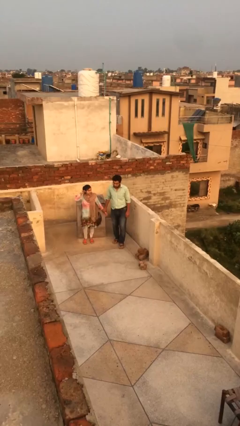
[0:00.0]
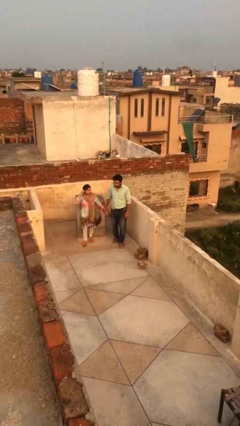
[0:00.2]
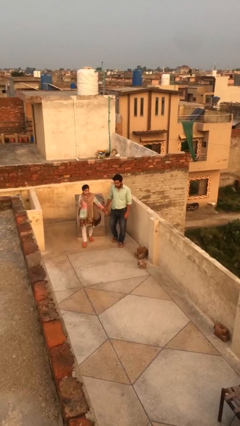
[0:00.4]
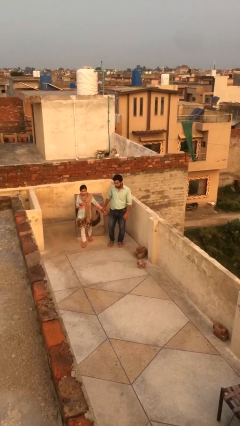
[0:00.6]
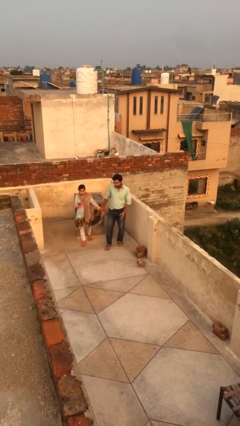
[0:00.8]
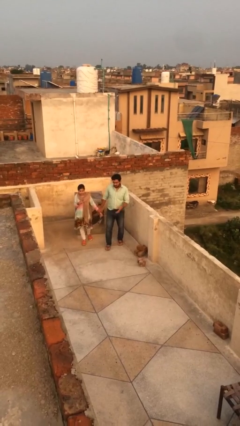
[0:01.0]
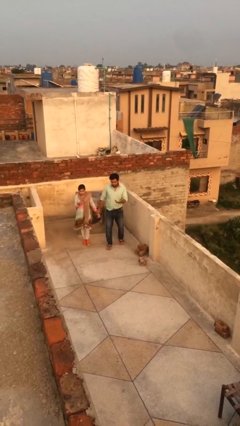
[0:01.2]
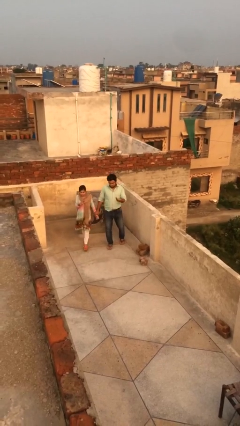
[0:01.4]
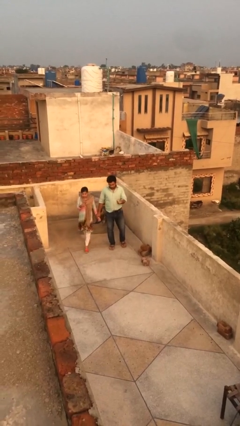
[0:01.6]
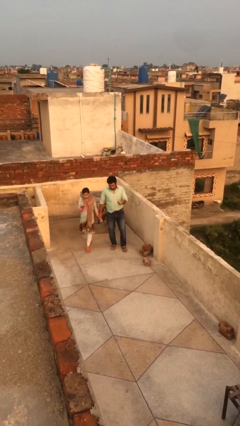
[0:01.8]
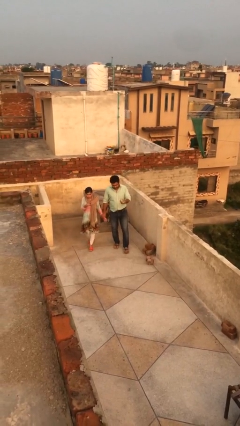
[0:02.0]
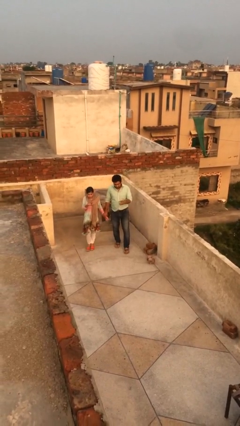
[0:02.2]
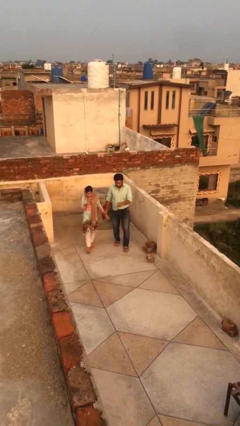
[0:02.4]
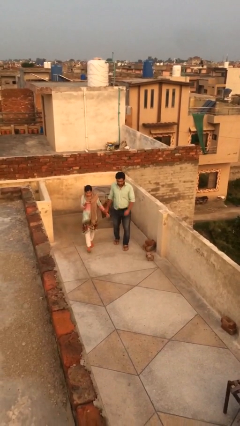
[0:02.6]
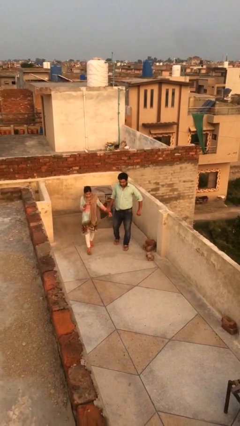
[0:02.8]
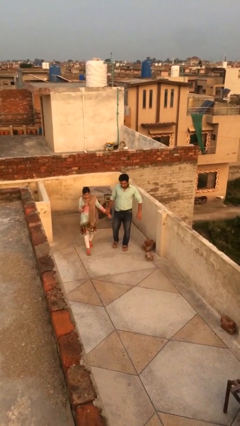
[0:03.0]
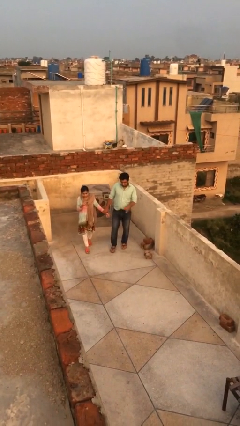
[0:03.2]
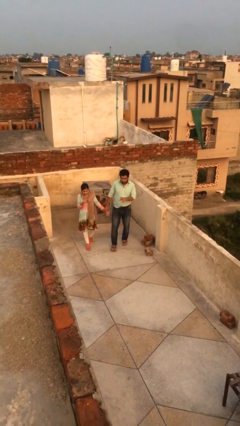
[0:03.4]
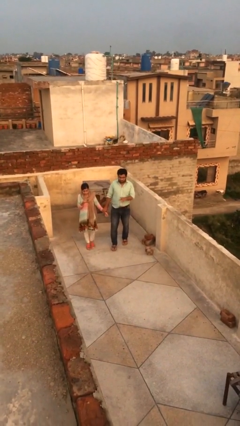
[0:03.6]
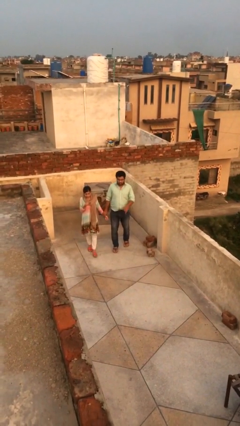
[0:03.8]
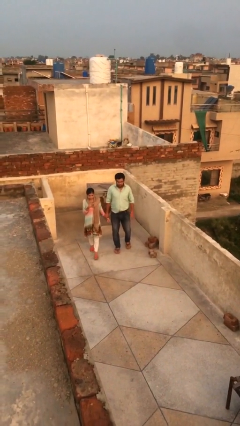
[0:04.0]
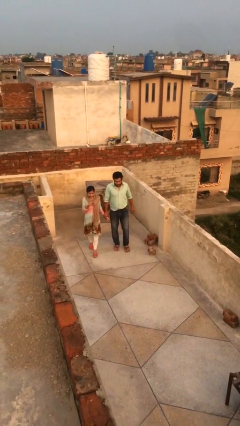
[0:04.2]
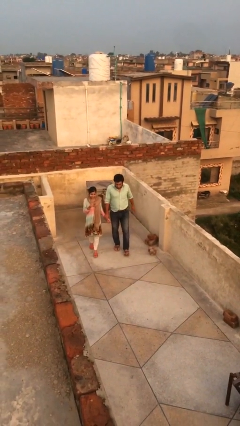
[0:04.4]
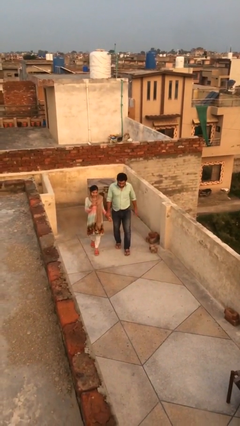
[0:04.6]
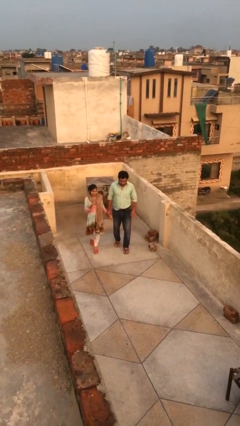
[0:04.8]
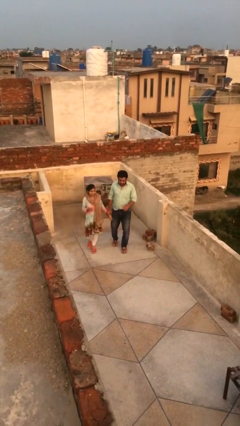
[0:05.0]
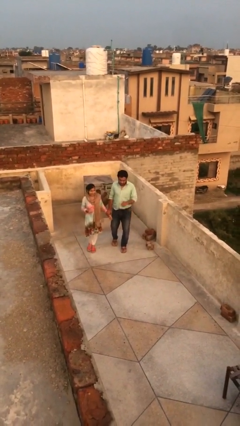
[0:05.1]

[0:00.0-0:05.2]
person holds hand

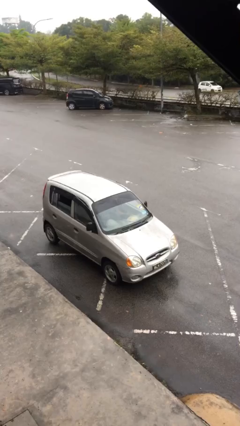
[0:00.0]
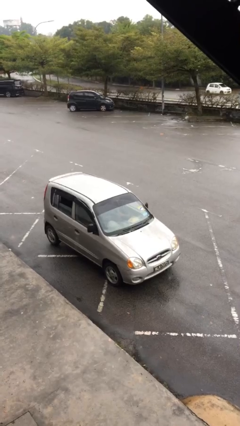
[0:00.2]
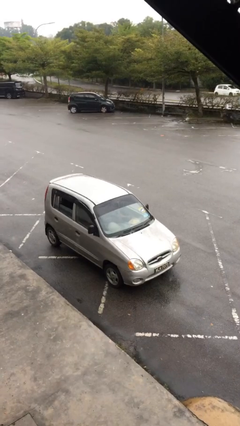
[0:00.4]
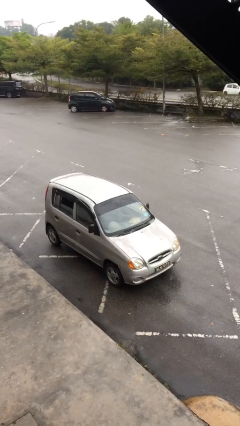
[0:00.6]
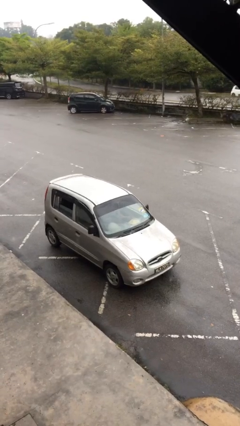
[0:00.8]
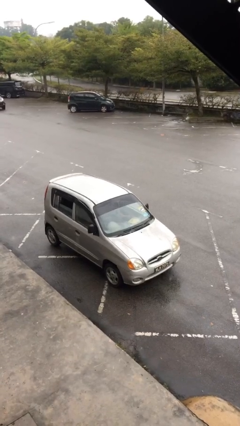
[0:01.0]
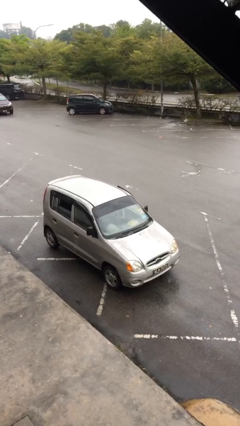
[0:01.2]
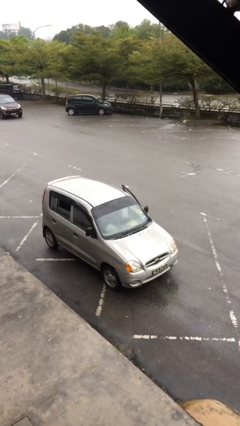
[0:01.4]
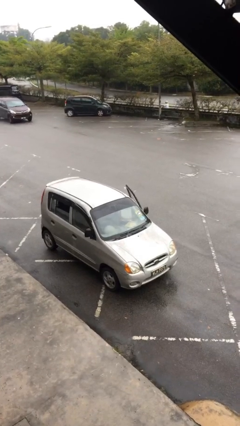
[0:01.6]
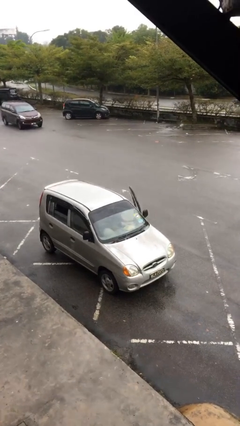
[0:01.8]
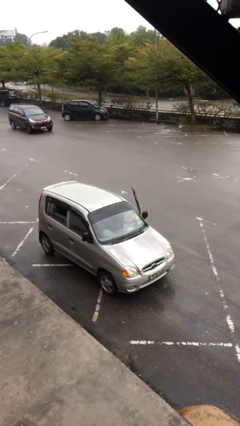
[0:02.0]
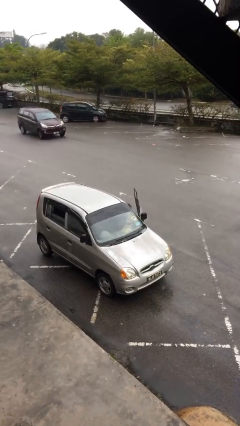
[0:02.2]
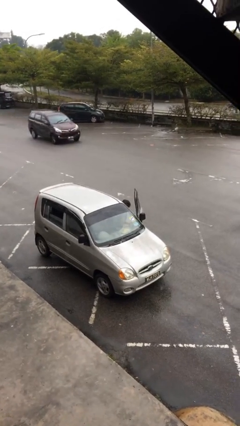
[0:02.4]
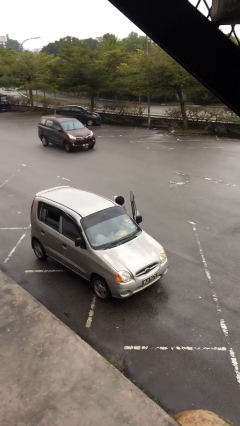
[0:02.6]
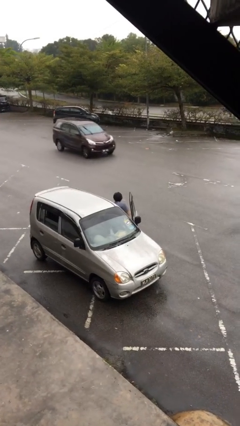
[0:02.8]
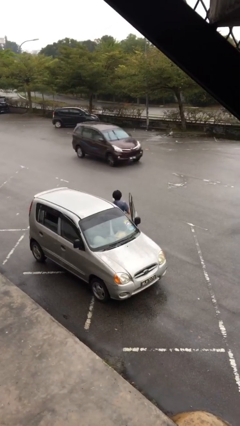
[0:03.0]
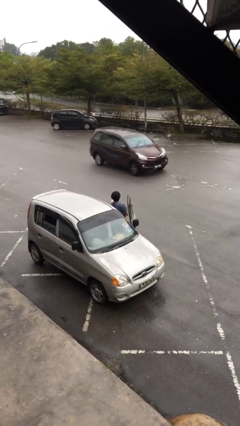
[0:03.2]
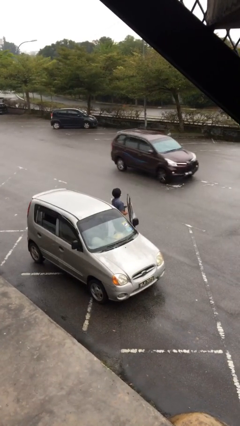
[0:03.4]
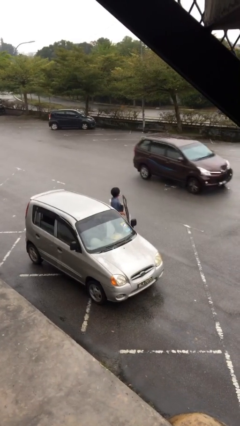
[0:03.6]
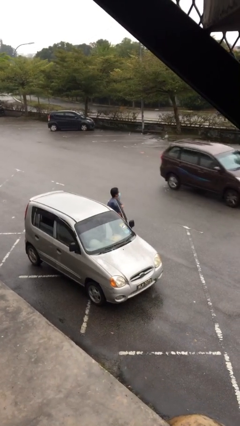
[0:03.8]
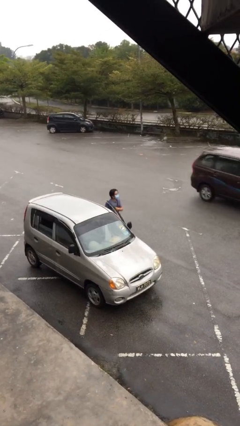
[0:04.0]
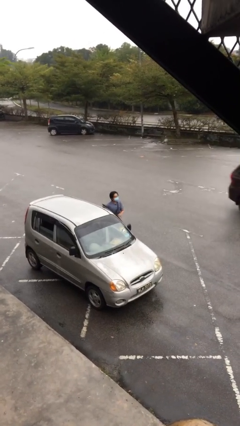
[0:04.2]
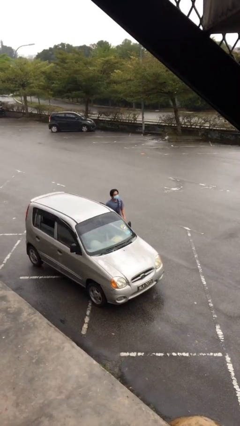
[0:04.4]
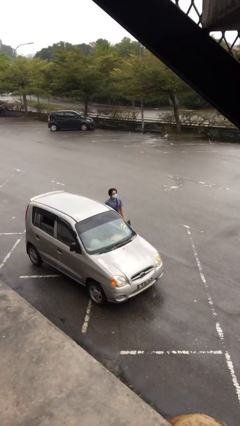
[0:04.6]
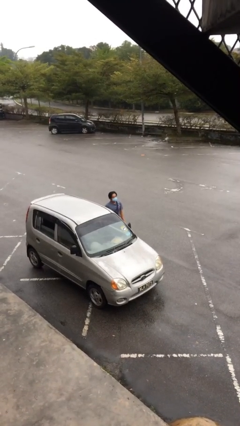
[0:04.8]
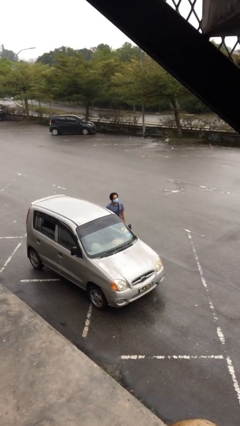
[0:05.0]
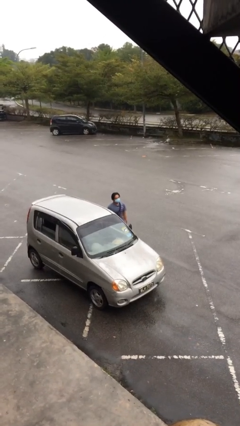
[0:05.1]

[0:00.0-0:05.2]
person exits car

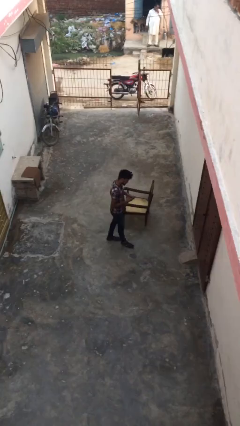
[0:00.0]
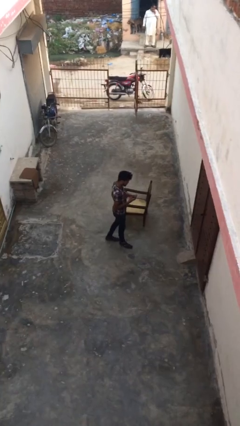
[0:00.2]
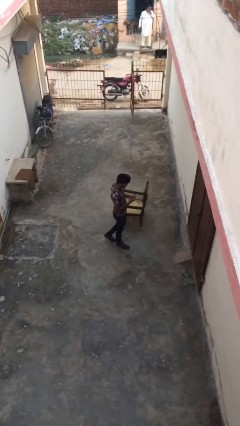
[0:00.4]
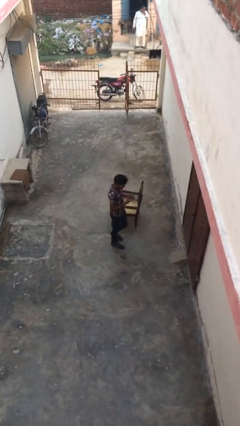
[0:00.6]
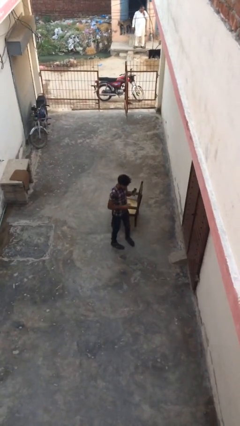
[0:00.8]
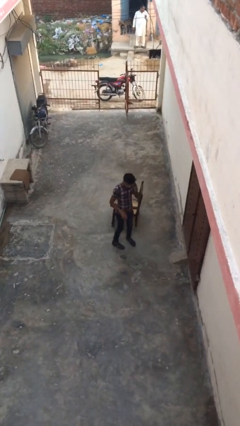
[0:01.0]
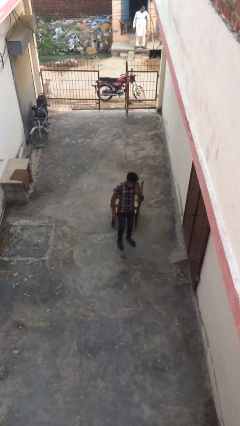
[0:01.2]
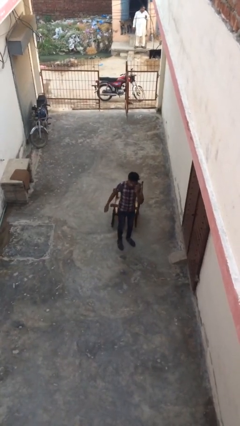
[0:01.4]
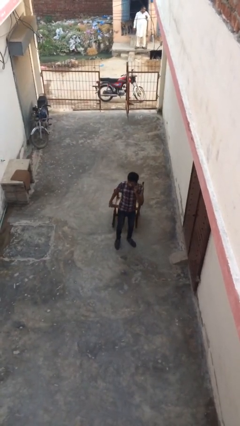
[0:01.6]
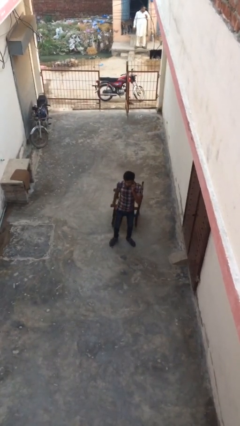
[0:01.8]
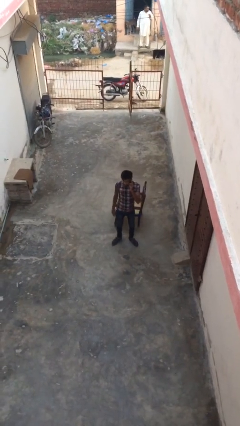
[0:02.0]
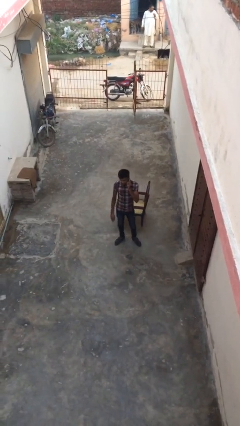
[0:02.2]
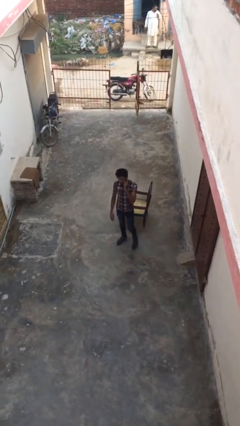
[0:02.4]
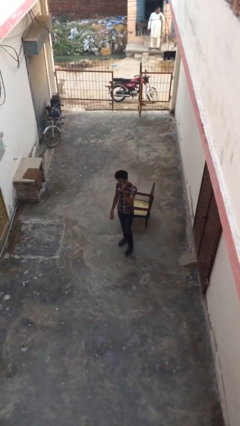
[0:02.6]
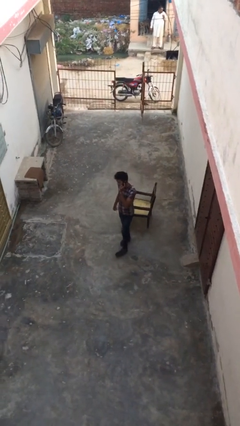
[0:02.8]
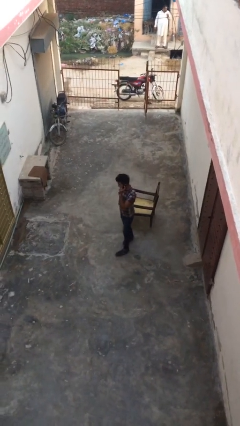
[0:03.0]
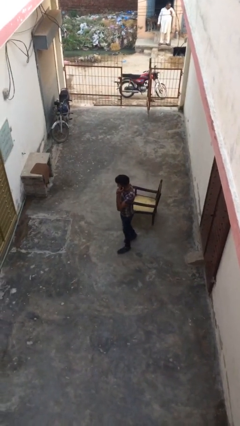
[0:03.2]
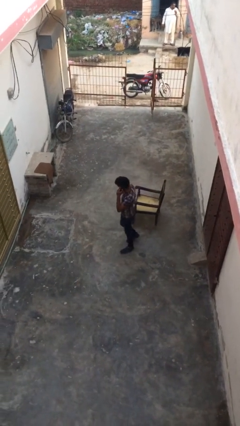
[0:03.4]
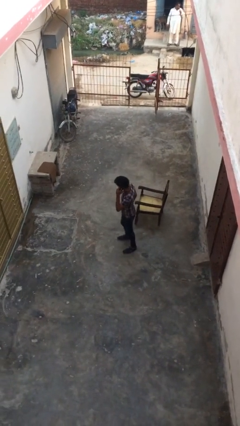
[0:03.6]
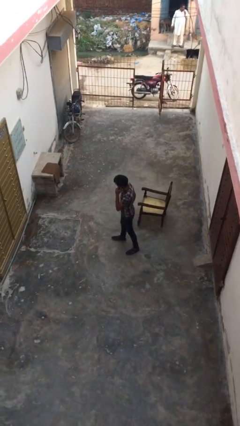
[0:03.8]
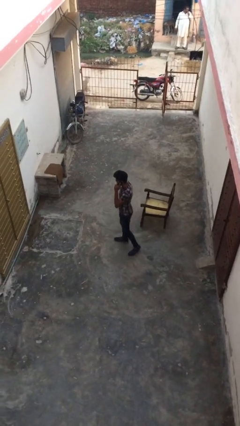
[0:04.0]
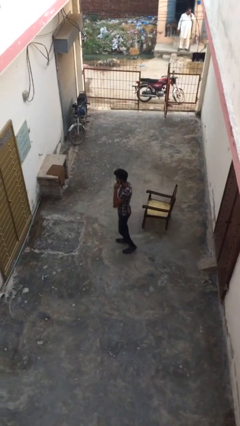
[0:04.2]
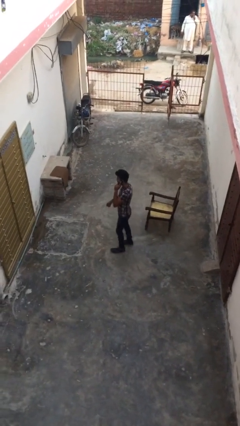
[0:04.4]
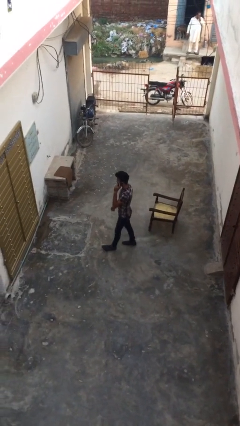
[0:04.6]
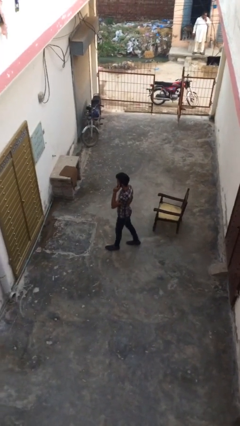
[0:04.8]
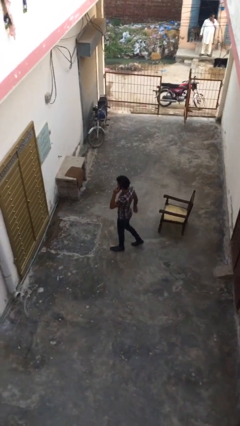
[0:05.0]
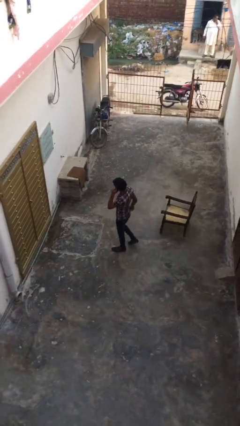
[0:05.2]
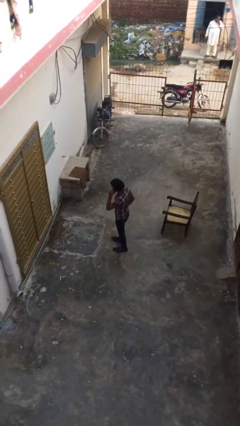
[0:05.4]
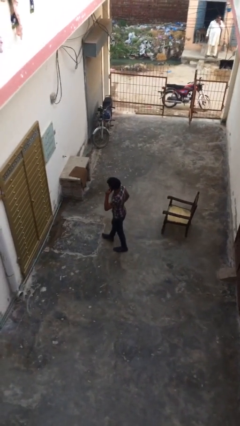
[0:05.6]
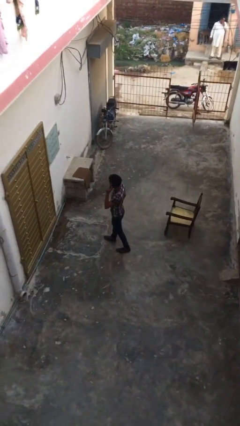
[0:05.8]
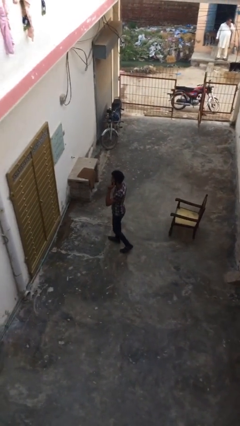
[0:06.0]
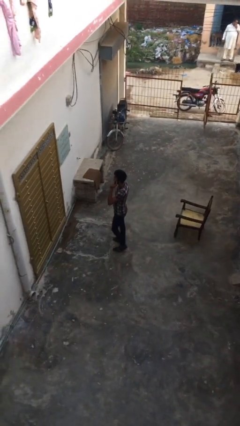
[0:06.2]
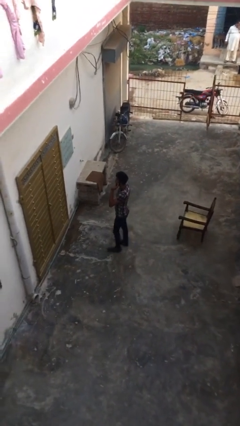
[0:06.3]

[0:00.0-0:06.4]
person talks on phone

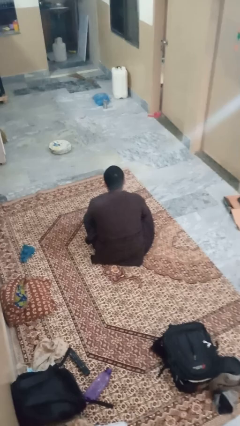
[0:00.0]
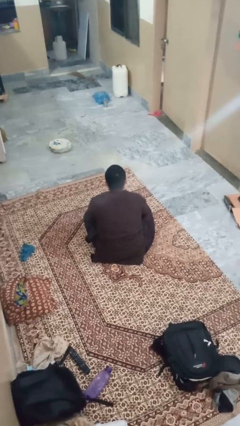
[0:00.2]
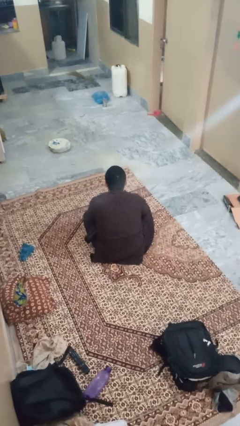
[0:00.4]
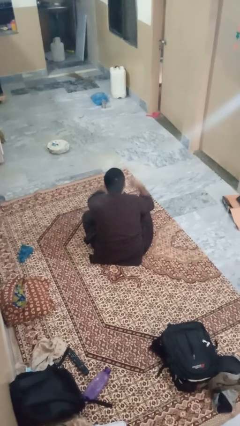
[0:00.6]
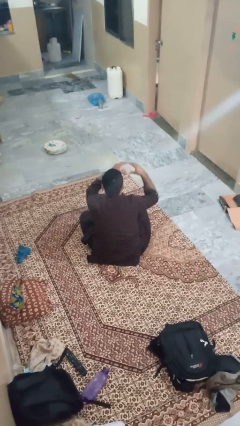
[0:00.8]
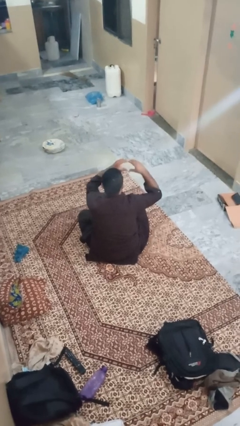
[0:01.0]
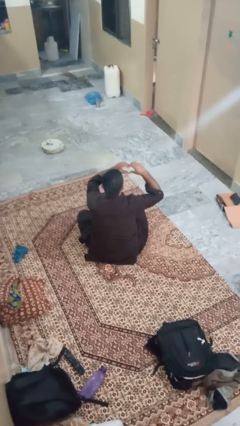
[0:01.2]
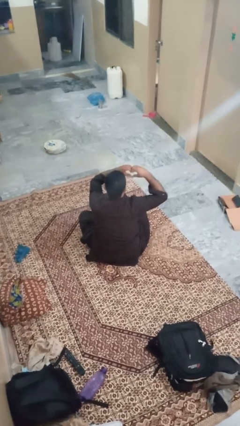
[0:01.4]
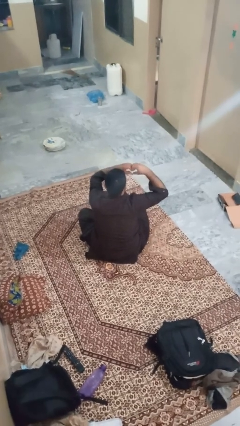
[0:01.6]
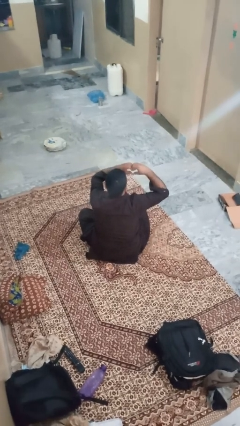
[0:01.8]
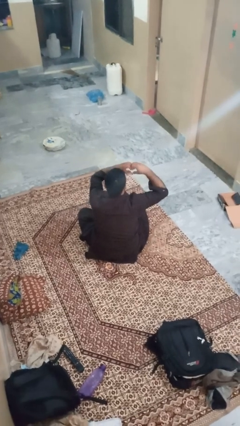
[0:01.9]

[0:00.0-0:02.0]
person gestures heart
